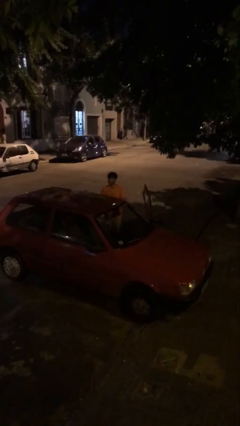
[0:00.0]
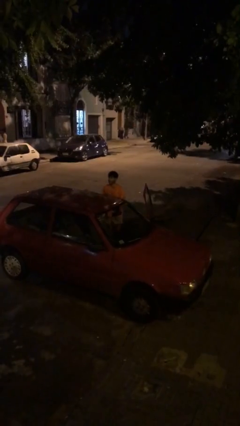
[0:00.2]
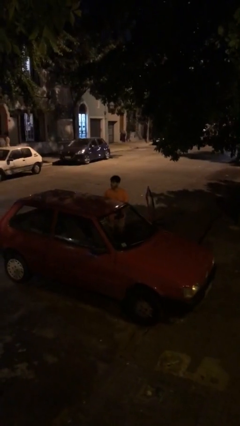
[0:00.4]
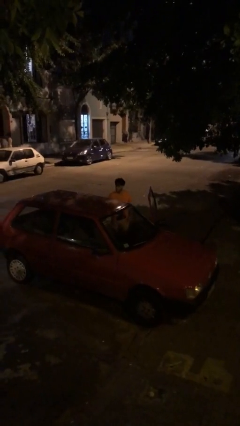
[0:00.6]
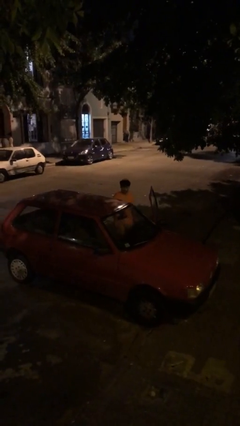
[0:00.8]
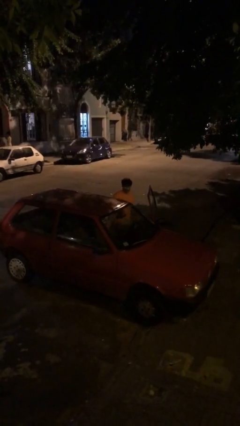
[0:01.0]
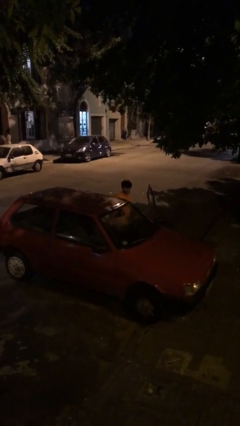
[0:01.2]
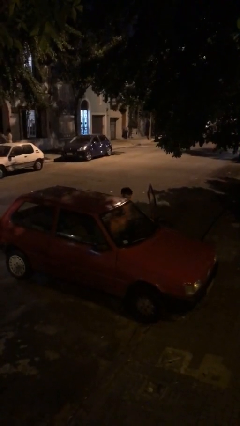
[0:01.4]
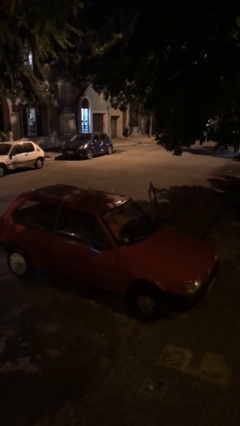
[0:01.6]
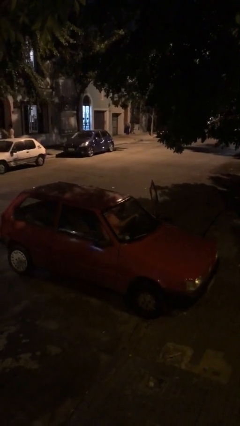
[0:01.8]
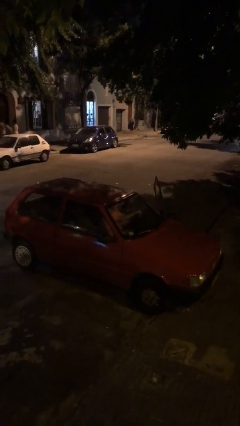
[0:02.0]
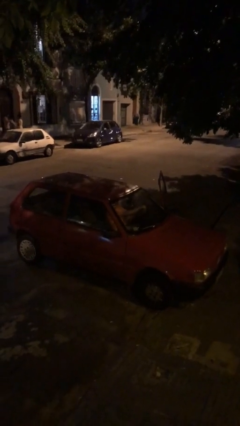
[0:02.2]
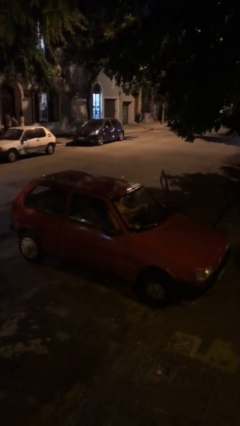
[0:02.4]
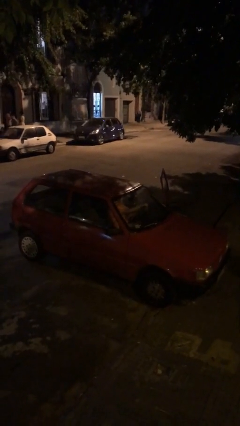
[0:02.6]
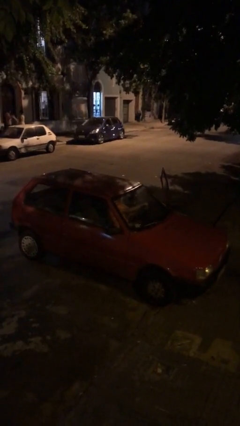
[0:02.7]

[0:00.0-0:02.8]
person enters car

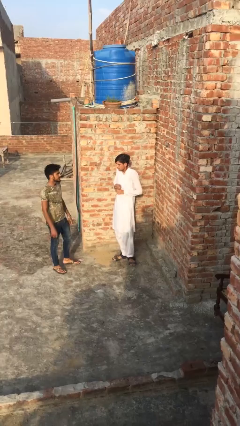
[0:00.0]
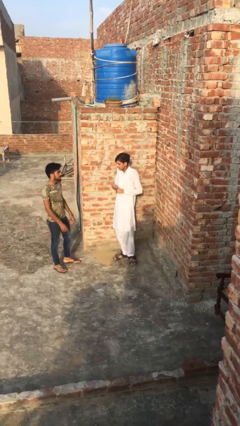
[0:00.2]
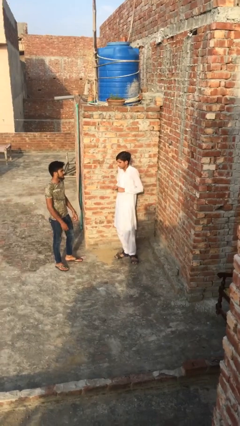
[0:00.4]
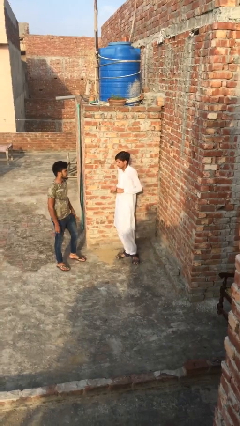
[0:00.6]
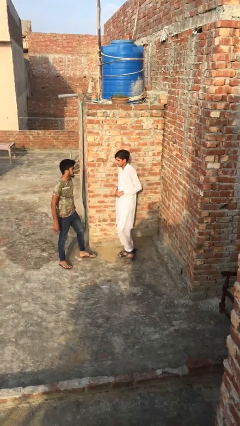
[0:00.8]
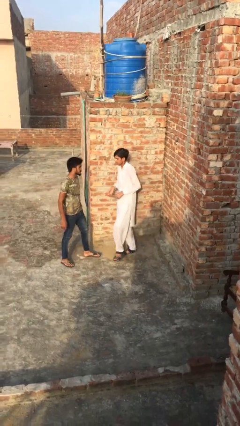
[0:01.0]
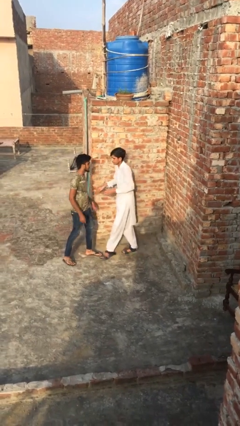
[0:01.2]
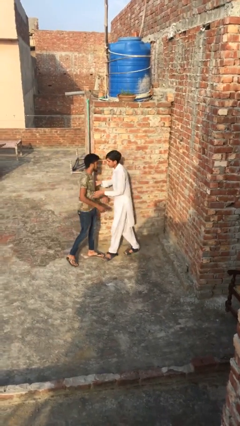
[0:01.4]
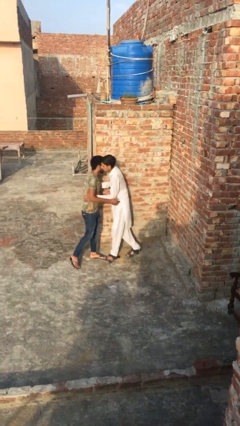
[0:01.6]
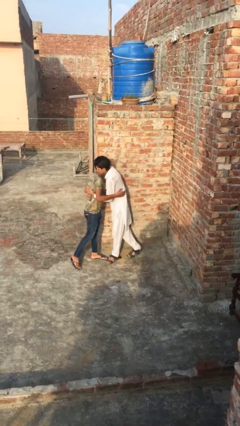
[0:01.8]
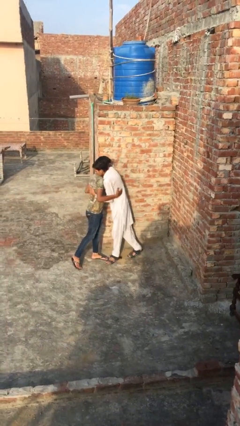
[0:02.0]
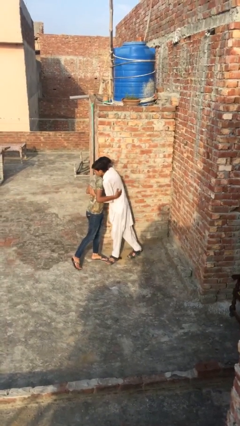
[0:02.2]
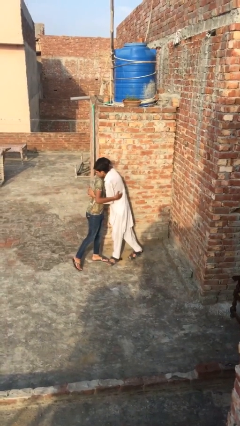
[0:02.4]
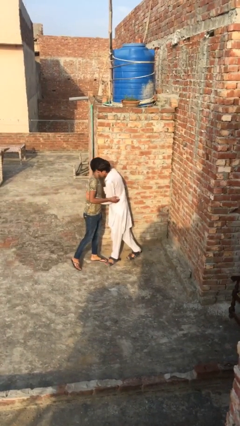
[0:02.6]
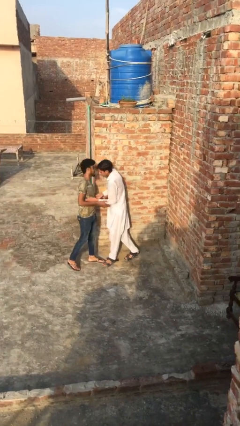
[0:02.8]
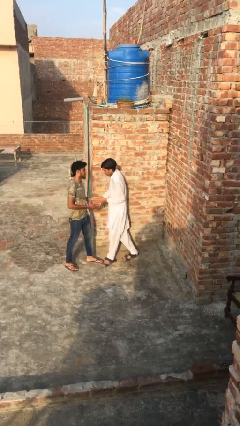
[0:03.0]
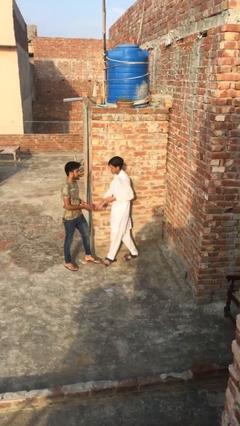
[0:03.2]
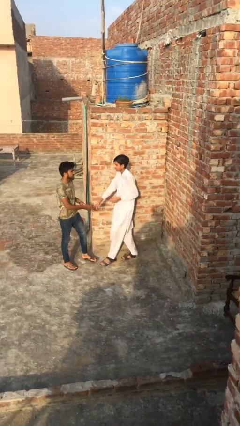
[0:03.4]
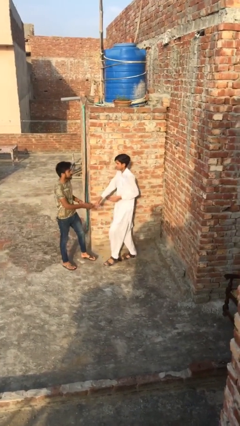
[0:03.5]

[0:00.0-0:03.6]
person embraces person

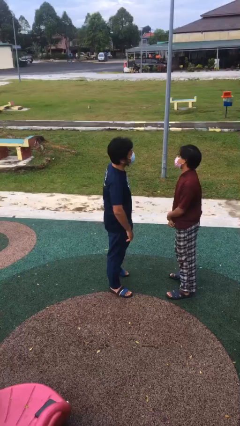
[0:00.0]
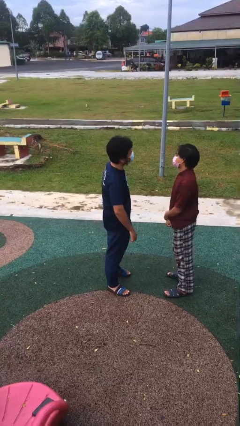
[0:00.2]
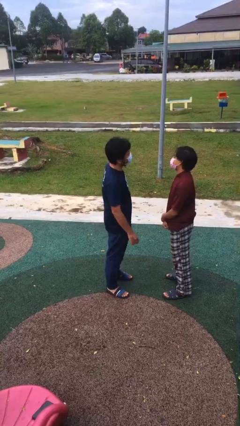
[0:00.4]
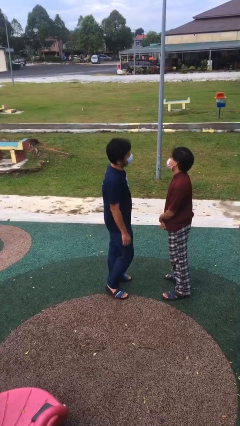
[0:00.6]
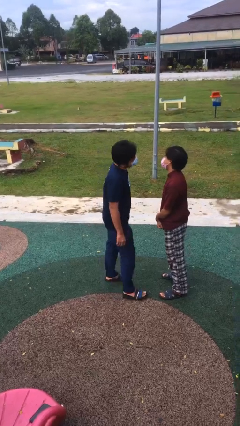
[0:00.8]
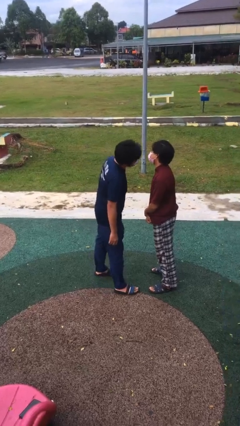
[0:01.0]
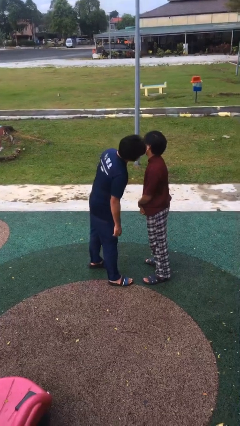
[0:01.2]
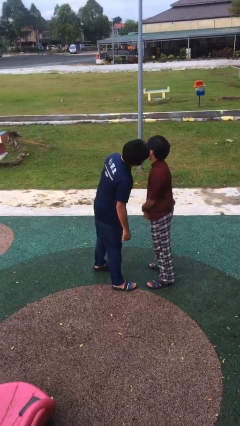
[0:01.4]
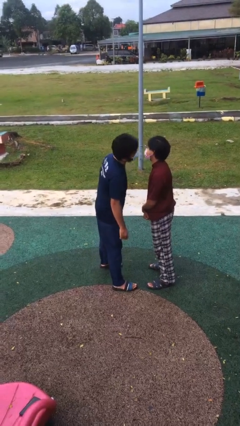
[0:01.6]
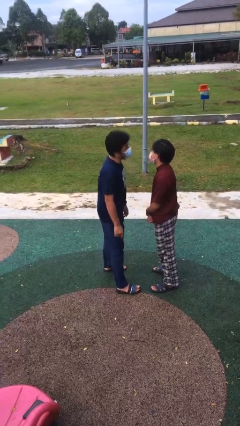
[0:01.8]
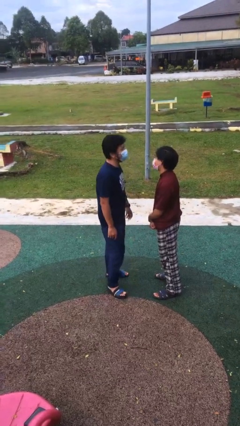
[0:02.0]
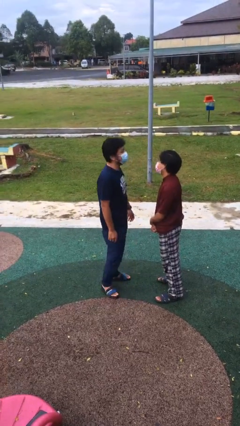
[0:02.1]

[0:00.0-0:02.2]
person kisses cheek of person

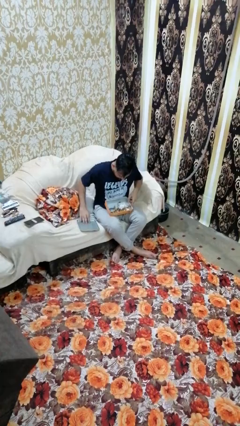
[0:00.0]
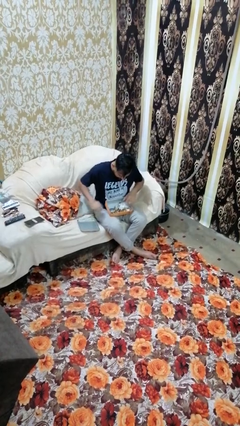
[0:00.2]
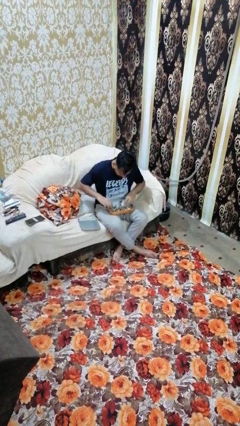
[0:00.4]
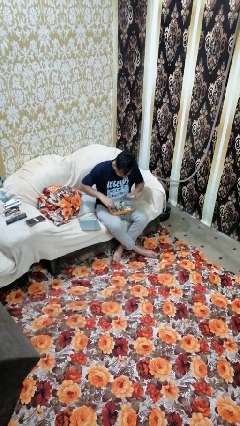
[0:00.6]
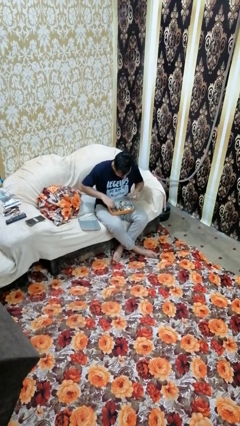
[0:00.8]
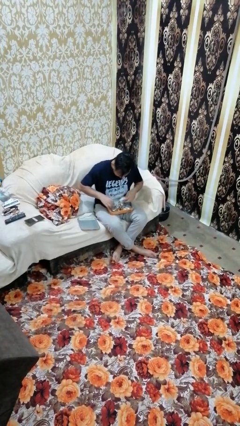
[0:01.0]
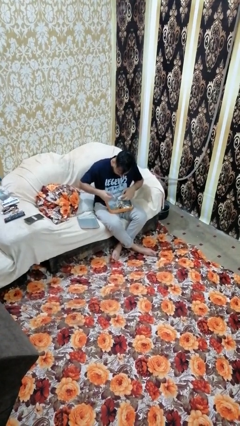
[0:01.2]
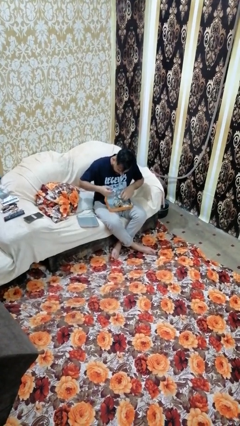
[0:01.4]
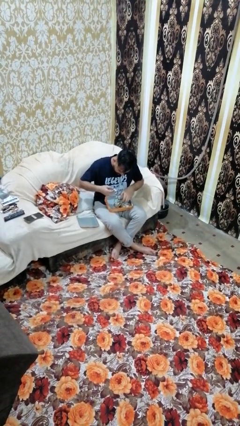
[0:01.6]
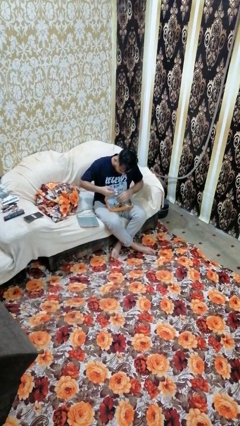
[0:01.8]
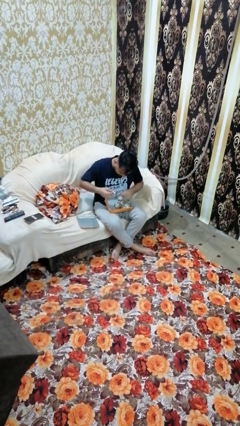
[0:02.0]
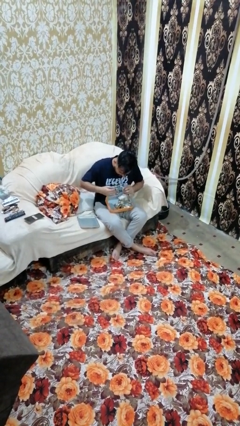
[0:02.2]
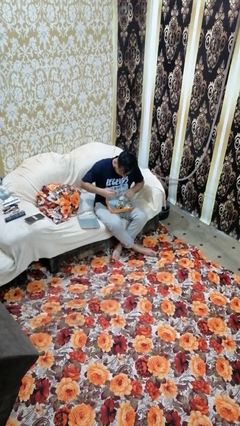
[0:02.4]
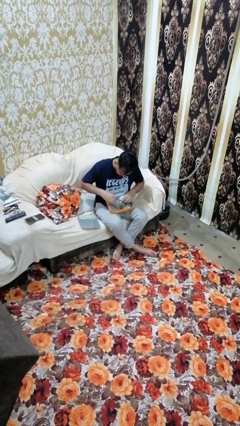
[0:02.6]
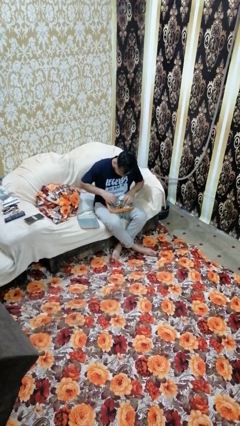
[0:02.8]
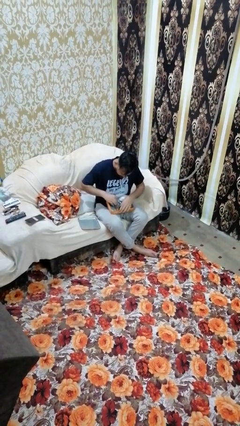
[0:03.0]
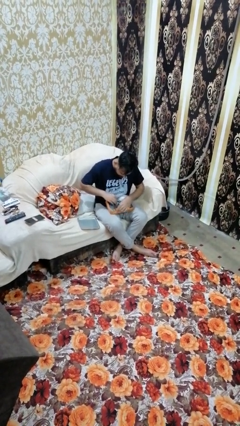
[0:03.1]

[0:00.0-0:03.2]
person searches jewelry box

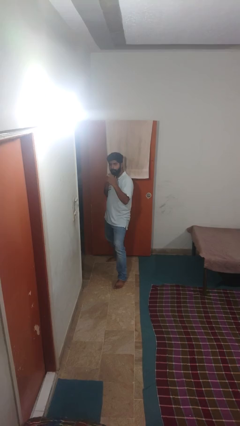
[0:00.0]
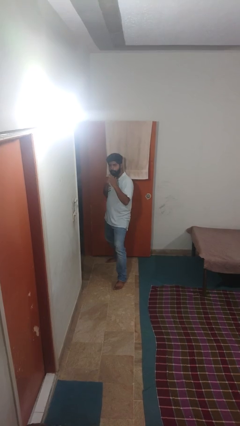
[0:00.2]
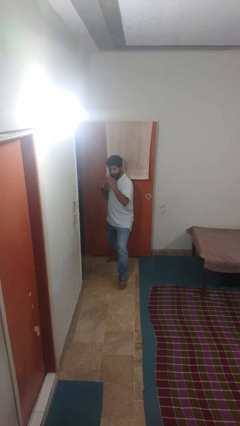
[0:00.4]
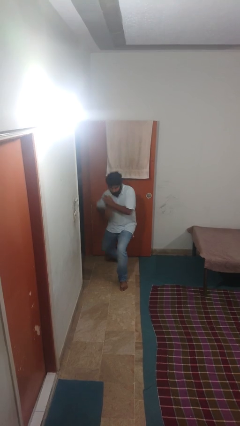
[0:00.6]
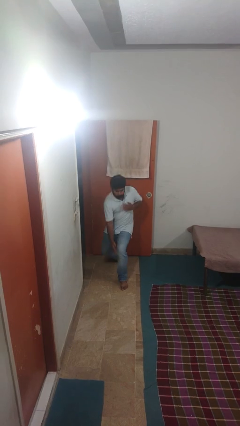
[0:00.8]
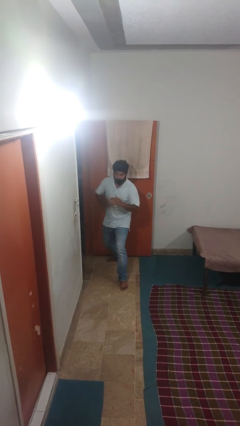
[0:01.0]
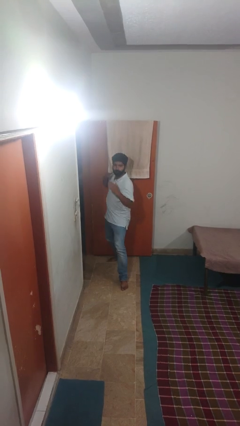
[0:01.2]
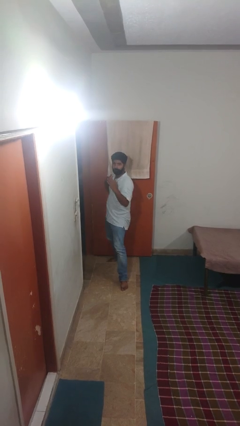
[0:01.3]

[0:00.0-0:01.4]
person karate chop

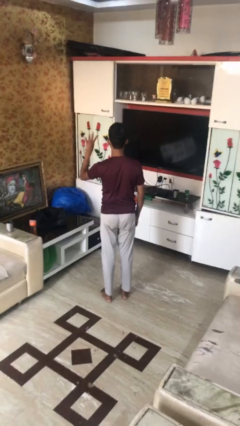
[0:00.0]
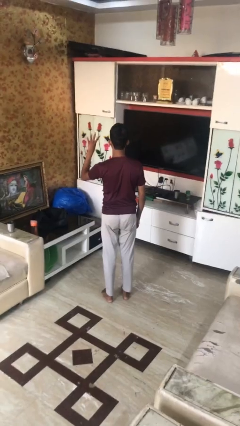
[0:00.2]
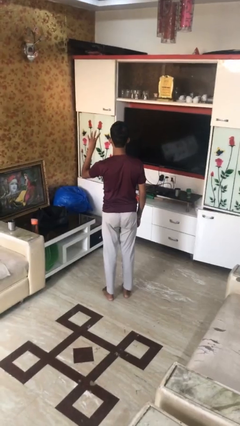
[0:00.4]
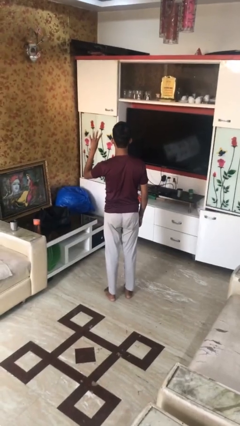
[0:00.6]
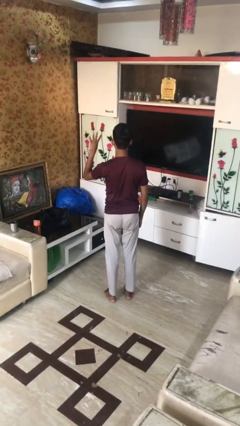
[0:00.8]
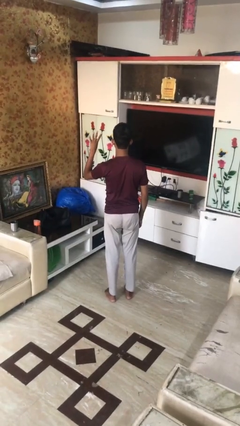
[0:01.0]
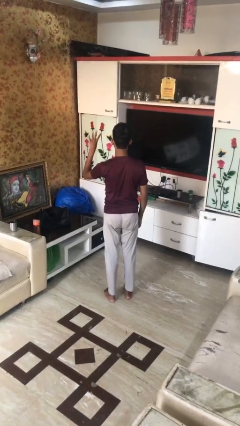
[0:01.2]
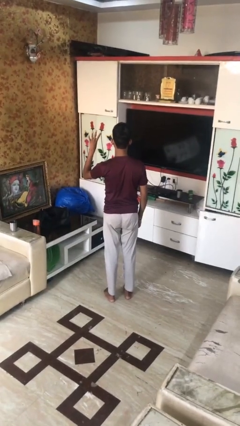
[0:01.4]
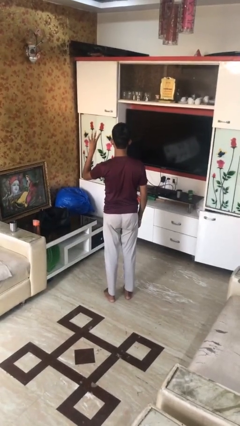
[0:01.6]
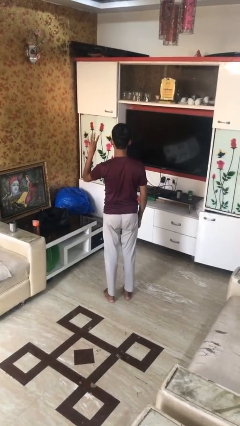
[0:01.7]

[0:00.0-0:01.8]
person gestures number four

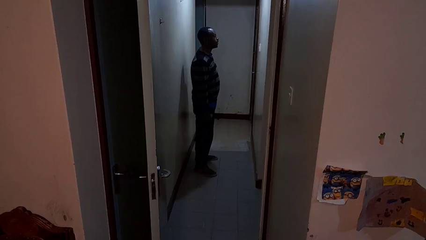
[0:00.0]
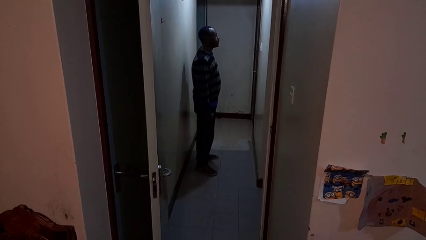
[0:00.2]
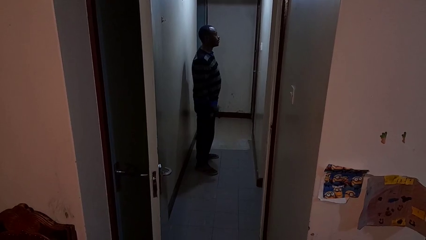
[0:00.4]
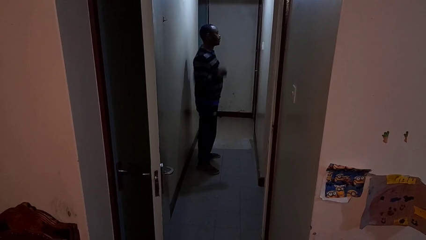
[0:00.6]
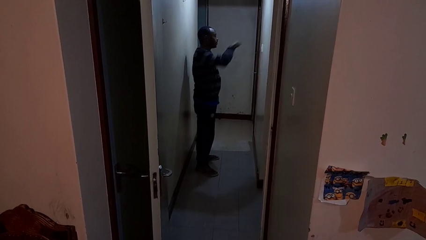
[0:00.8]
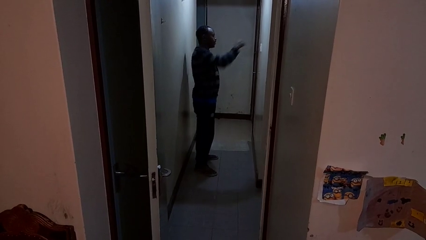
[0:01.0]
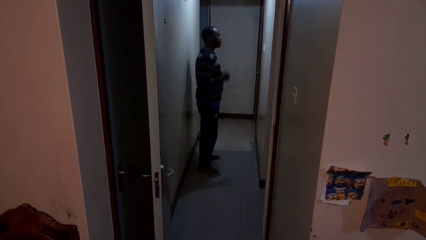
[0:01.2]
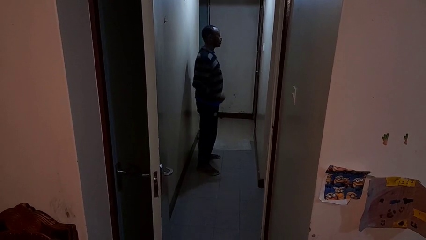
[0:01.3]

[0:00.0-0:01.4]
person punches

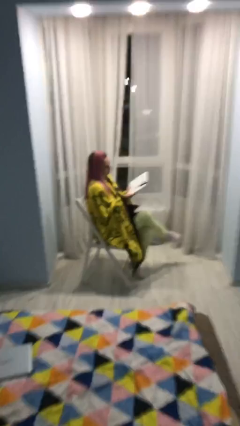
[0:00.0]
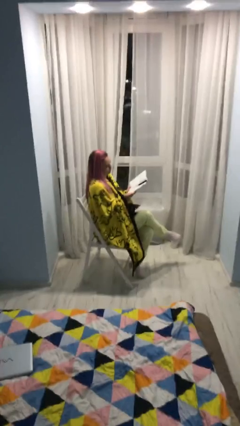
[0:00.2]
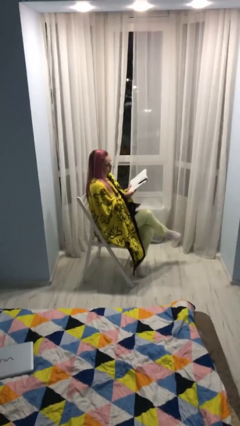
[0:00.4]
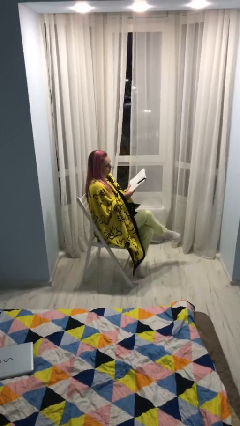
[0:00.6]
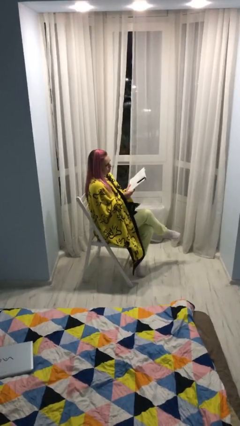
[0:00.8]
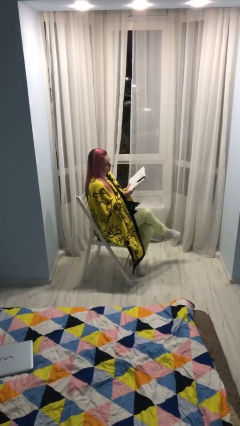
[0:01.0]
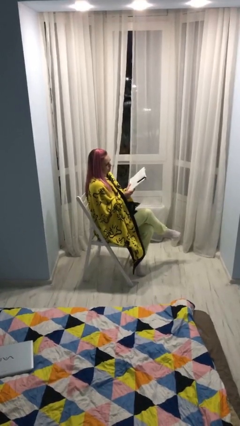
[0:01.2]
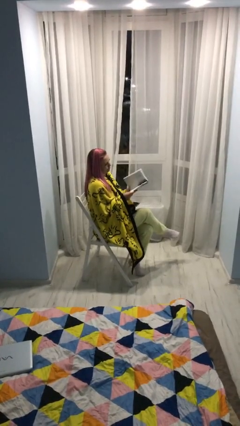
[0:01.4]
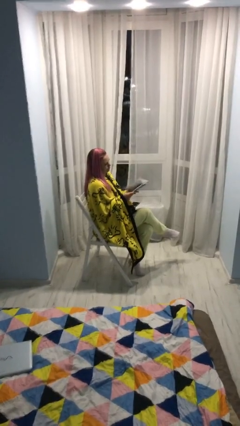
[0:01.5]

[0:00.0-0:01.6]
person reads document
